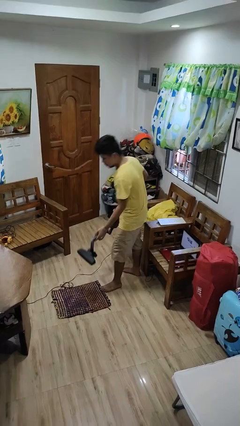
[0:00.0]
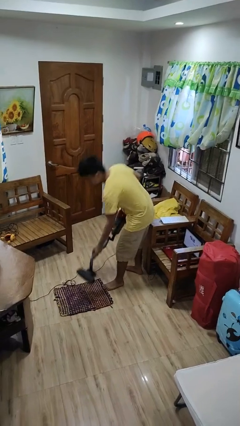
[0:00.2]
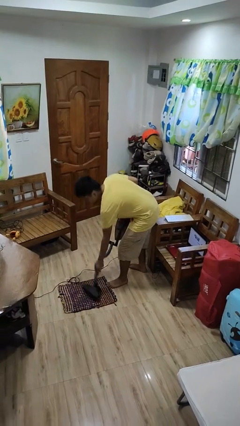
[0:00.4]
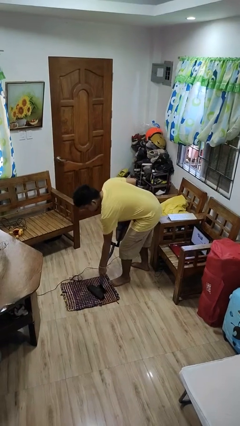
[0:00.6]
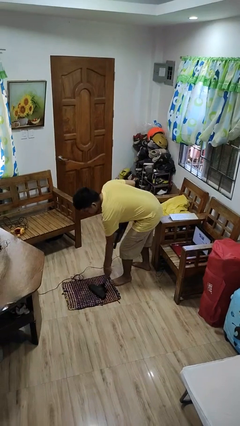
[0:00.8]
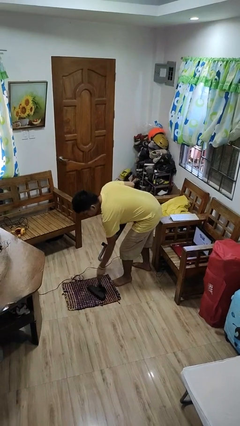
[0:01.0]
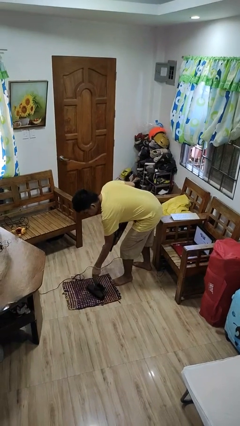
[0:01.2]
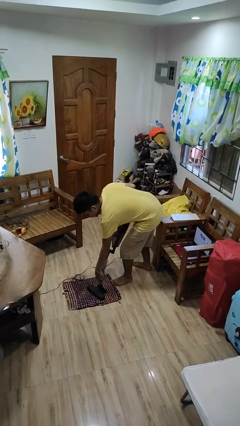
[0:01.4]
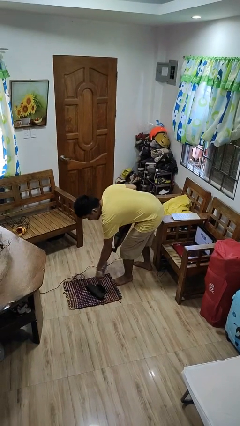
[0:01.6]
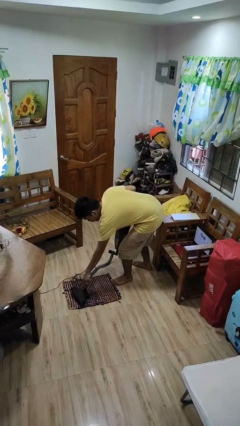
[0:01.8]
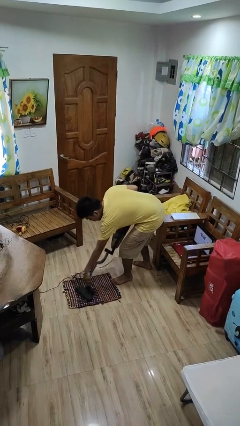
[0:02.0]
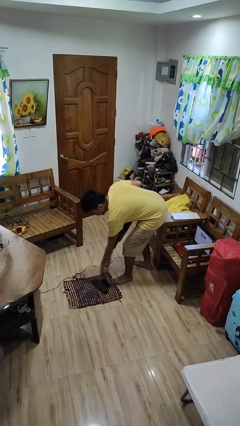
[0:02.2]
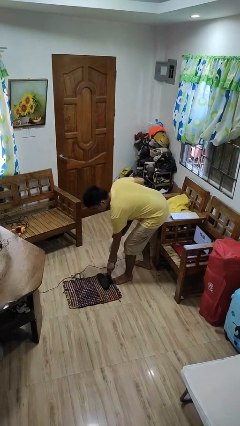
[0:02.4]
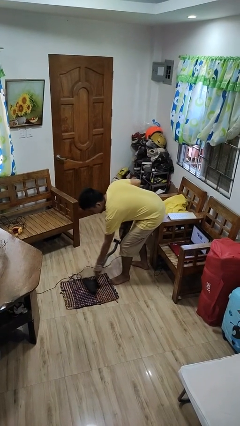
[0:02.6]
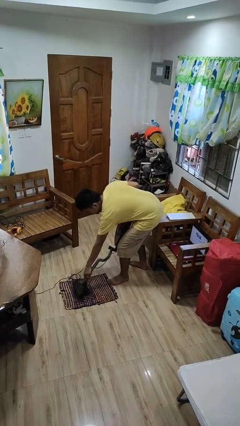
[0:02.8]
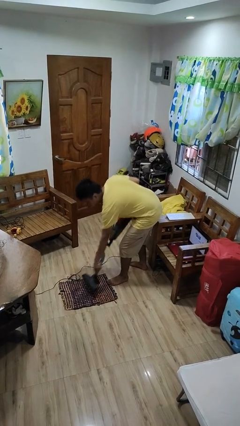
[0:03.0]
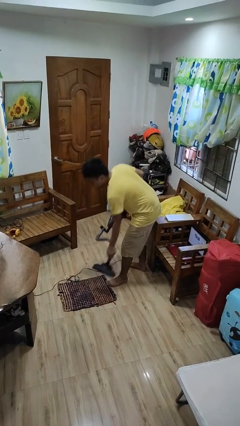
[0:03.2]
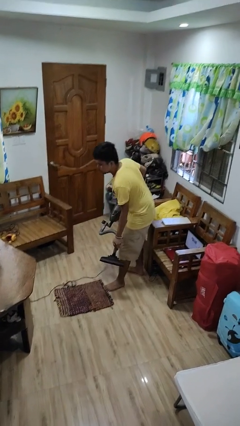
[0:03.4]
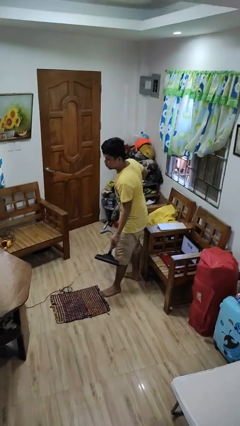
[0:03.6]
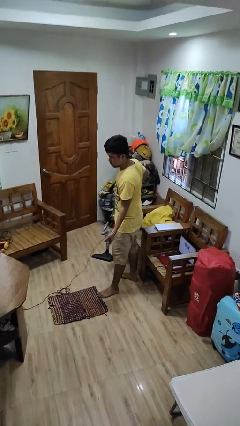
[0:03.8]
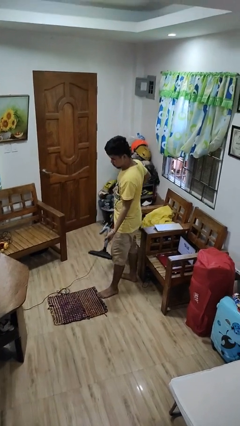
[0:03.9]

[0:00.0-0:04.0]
person vacuums carpet

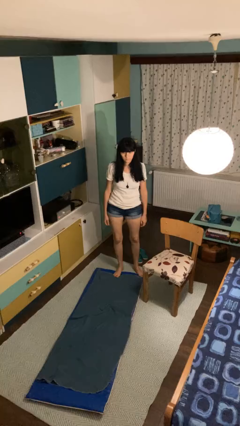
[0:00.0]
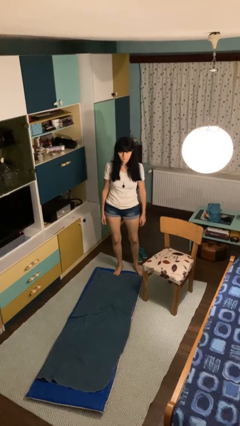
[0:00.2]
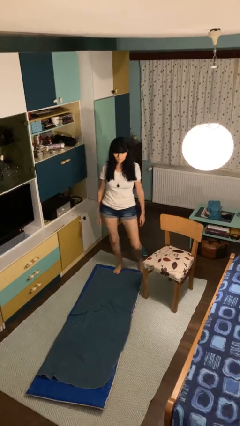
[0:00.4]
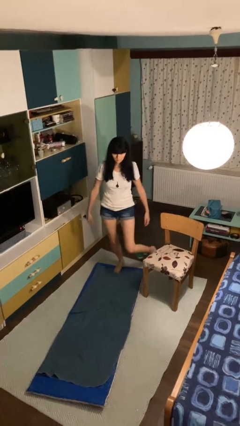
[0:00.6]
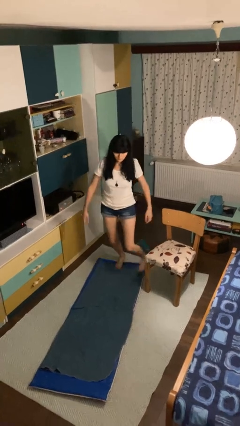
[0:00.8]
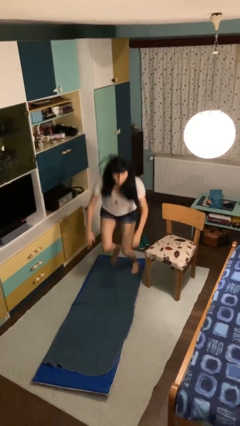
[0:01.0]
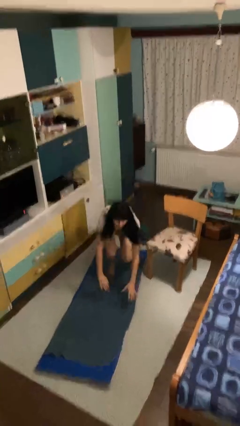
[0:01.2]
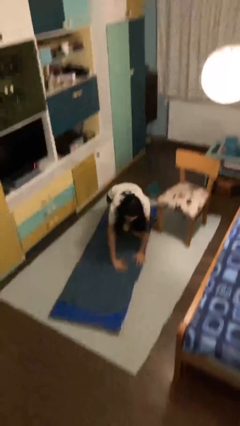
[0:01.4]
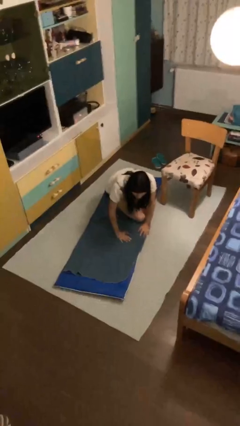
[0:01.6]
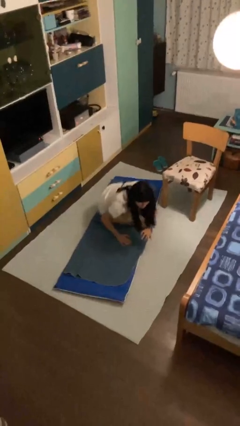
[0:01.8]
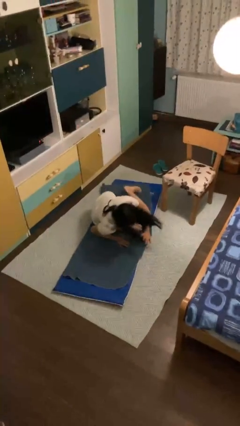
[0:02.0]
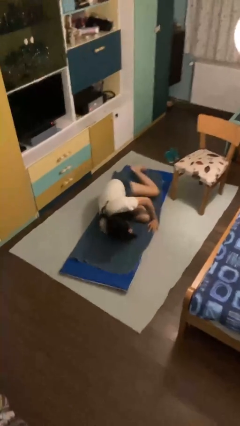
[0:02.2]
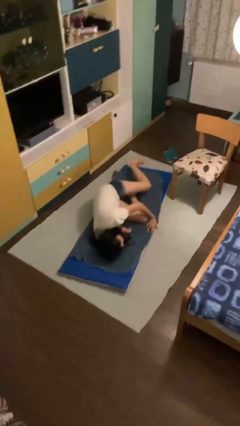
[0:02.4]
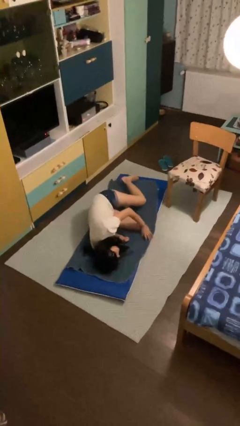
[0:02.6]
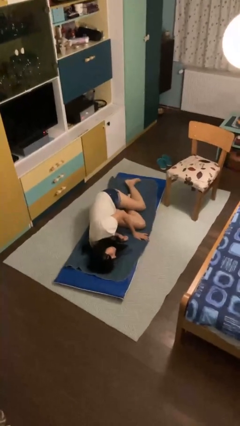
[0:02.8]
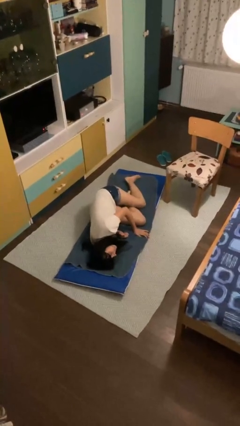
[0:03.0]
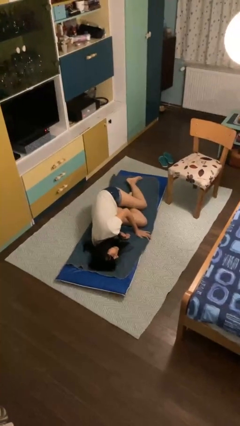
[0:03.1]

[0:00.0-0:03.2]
person trips on object on floor

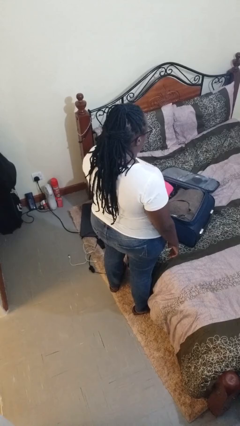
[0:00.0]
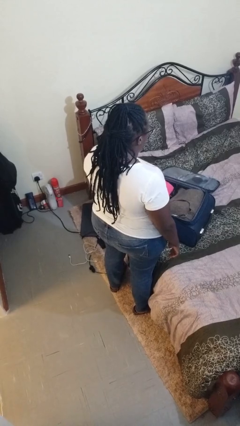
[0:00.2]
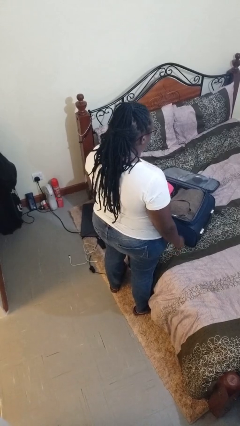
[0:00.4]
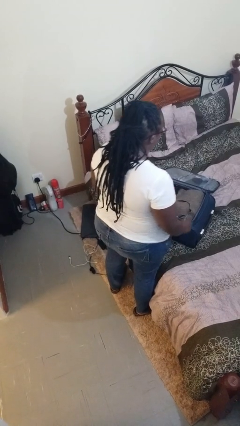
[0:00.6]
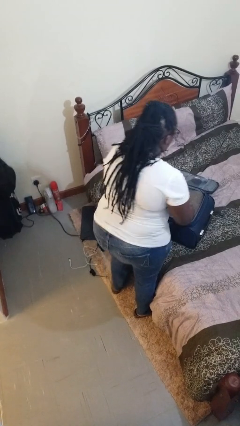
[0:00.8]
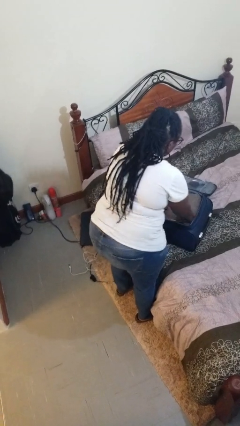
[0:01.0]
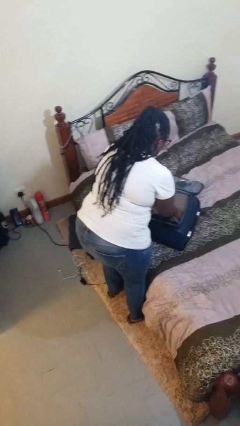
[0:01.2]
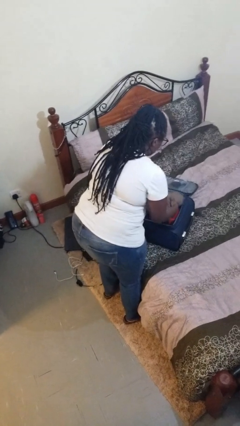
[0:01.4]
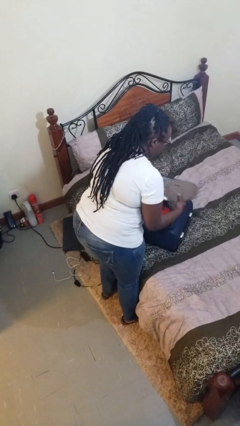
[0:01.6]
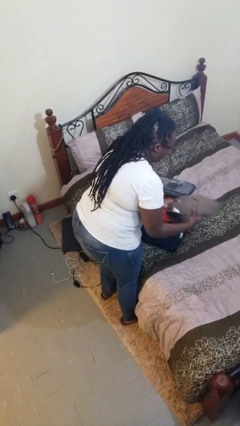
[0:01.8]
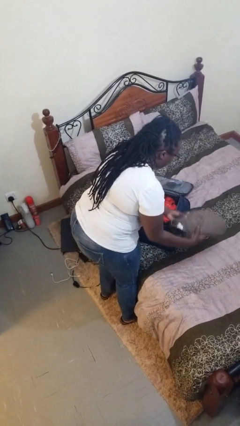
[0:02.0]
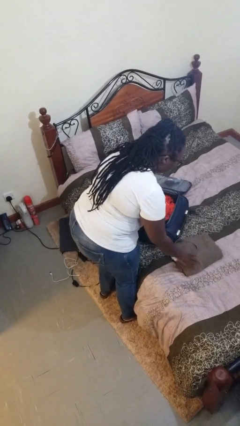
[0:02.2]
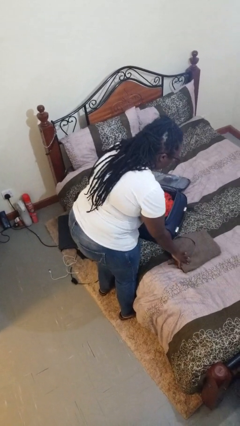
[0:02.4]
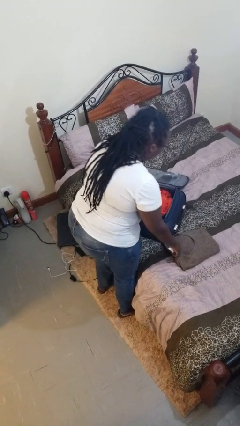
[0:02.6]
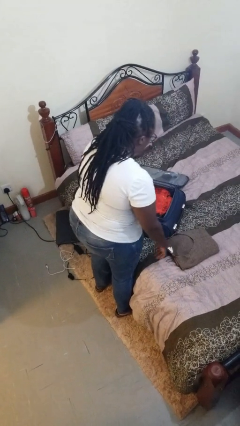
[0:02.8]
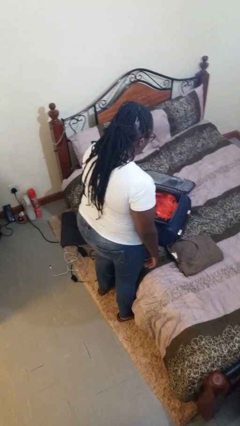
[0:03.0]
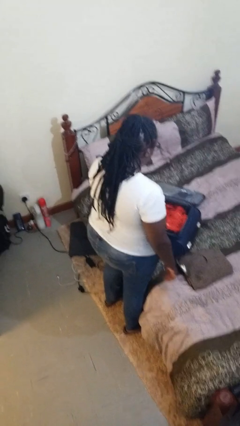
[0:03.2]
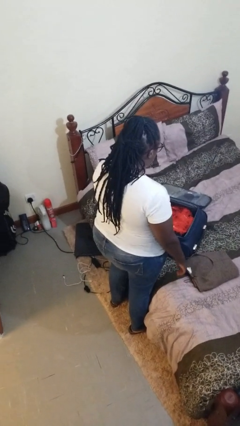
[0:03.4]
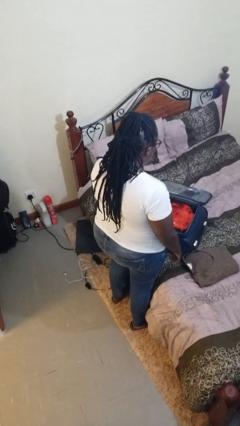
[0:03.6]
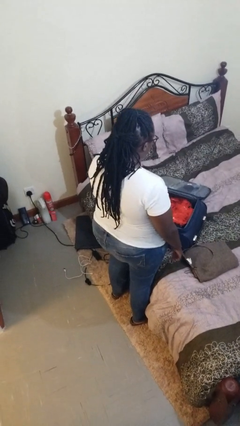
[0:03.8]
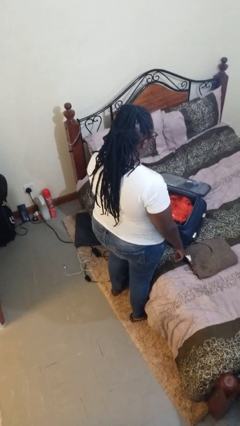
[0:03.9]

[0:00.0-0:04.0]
person unloads clothes from suitcase

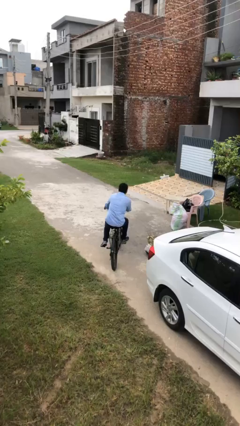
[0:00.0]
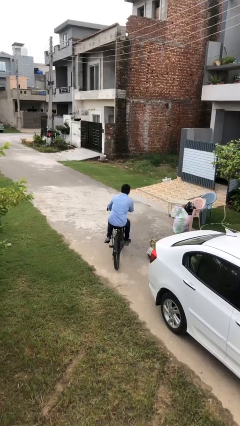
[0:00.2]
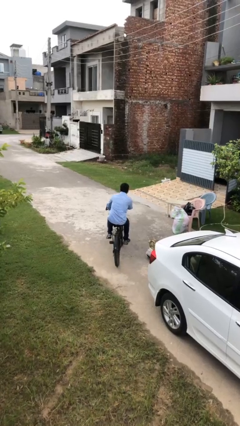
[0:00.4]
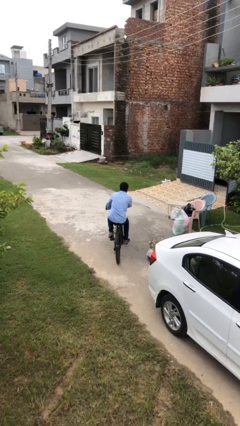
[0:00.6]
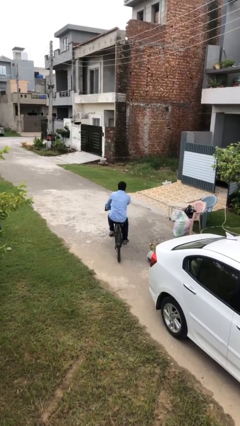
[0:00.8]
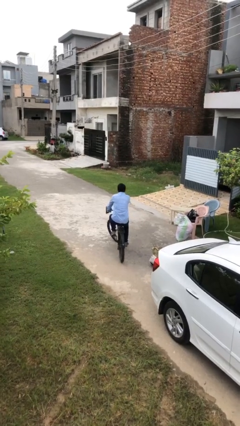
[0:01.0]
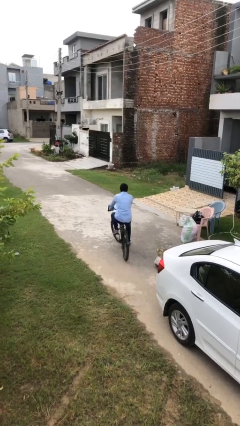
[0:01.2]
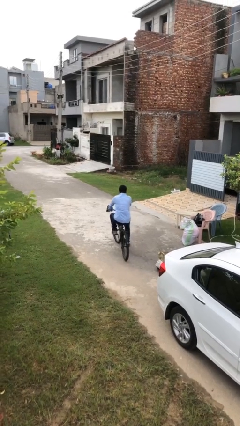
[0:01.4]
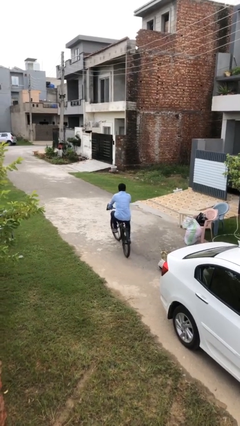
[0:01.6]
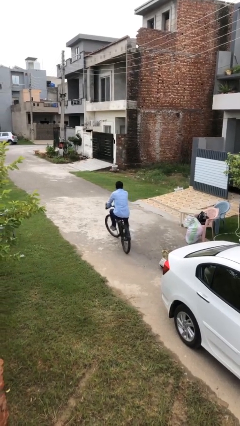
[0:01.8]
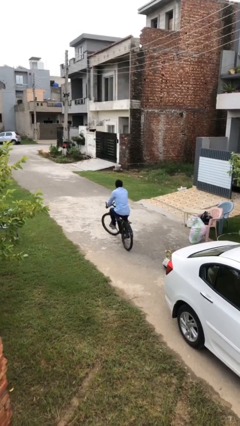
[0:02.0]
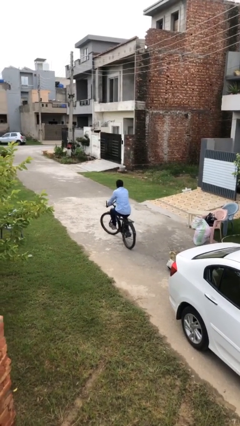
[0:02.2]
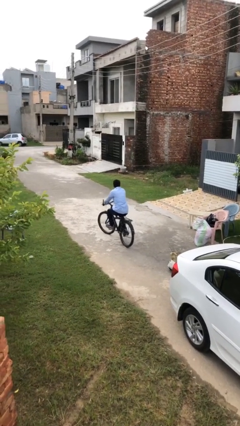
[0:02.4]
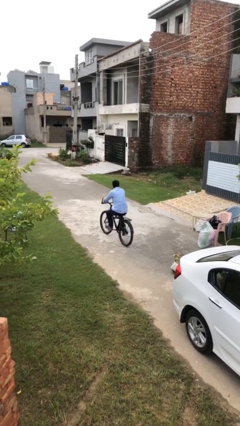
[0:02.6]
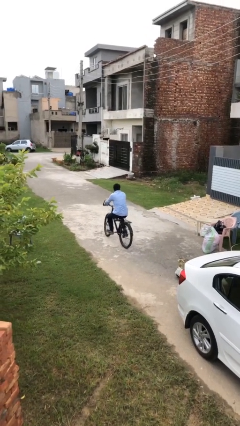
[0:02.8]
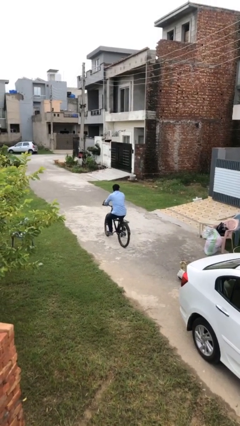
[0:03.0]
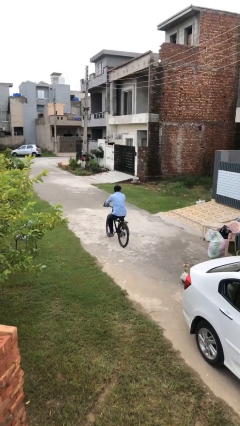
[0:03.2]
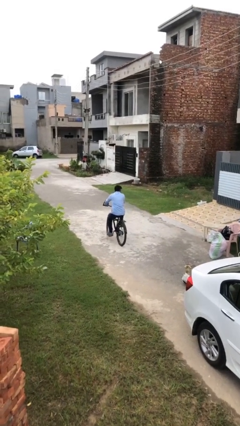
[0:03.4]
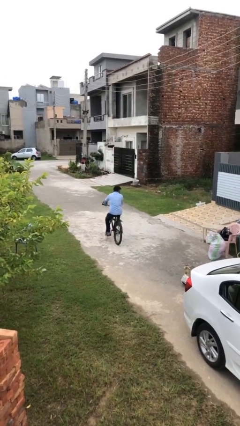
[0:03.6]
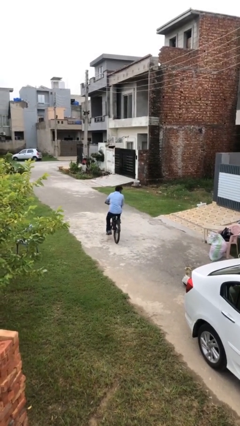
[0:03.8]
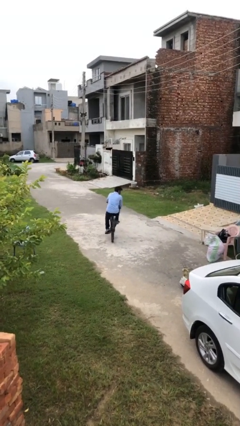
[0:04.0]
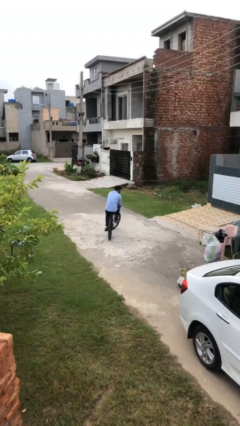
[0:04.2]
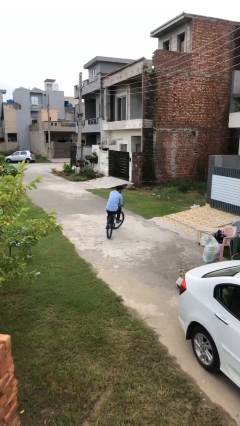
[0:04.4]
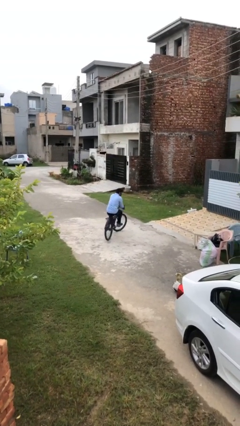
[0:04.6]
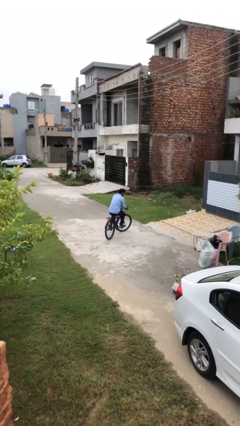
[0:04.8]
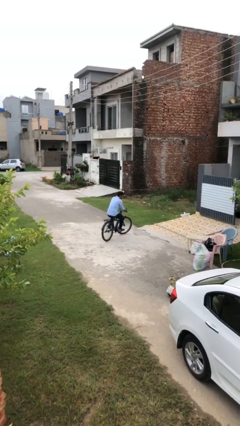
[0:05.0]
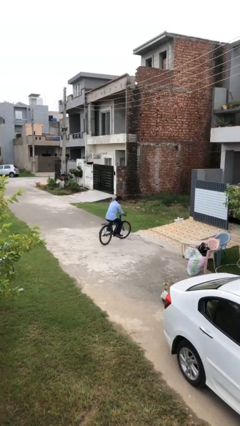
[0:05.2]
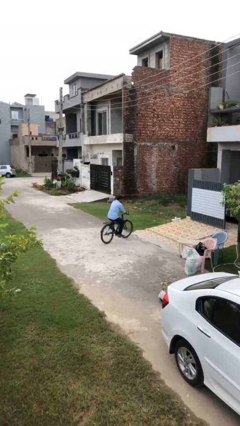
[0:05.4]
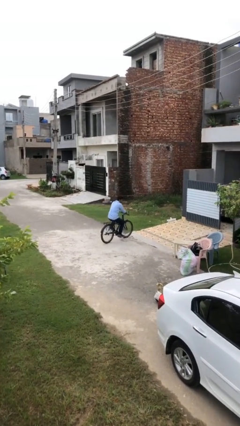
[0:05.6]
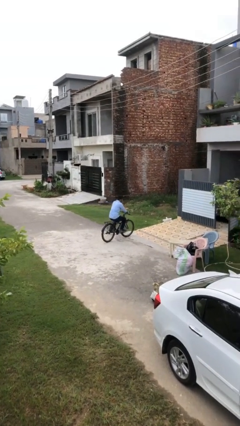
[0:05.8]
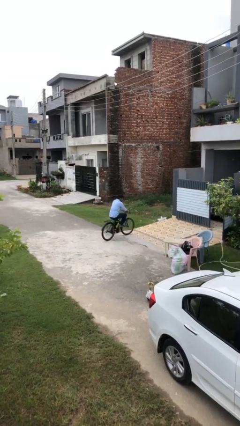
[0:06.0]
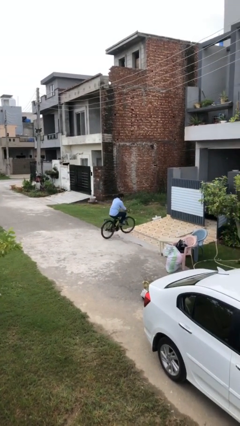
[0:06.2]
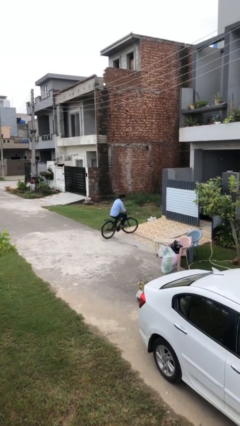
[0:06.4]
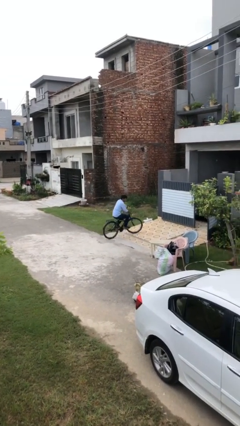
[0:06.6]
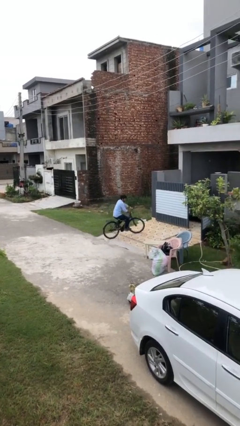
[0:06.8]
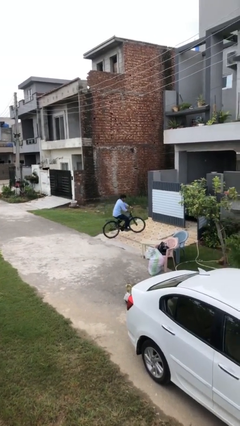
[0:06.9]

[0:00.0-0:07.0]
person rides bicycle
